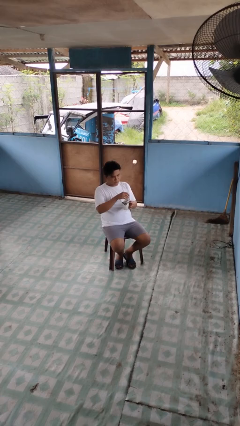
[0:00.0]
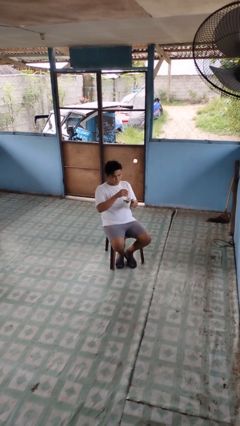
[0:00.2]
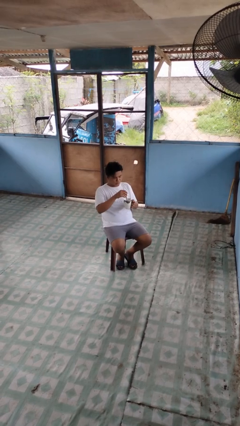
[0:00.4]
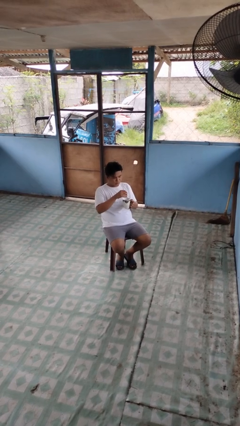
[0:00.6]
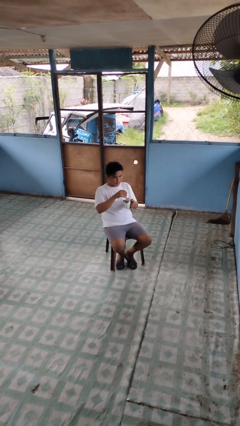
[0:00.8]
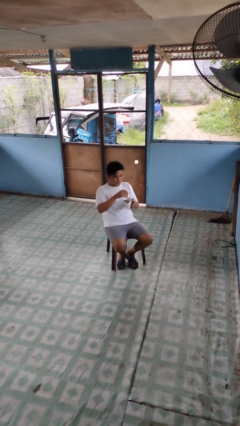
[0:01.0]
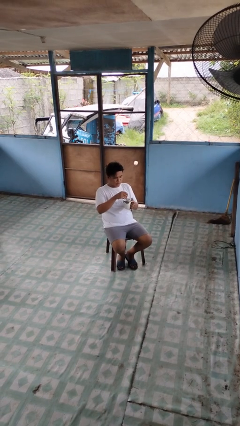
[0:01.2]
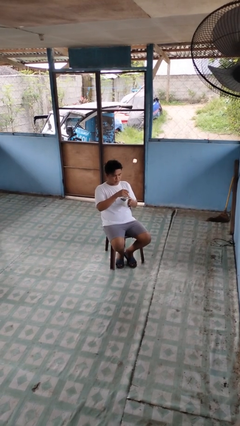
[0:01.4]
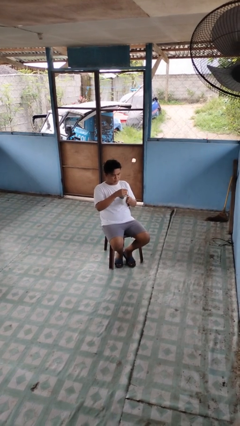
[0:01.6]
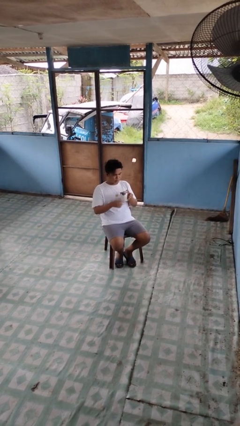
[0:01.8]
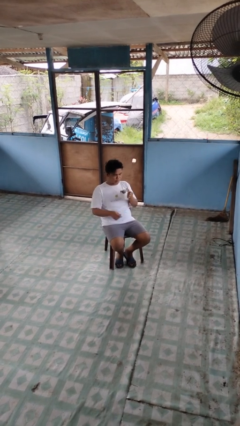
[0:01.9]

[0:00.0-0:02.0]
person stirs mug

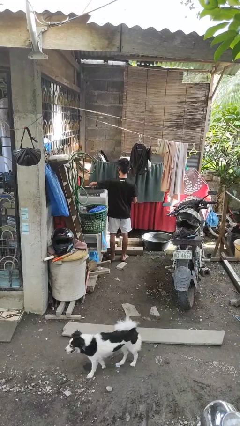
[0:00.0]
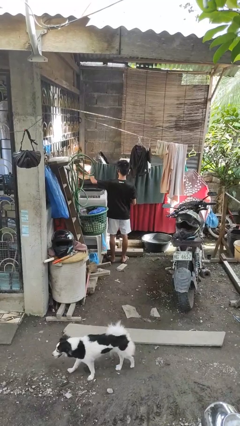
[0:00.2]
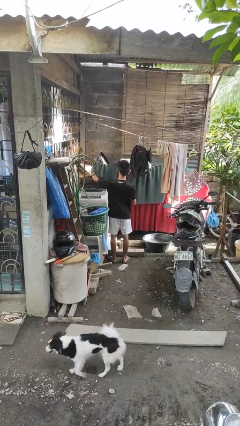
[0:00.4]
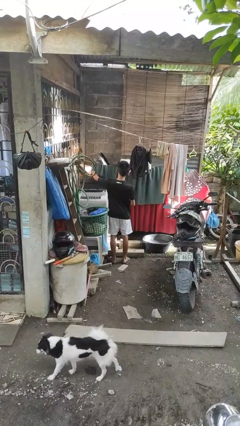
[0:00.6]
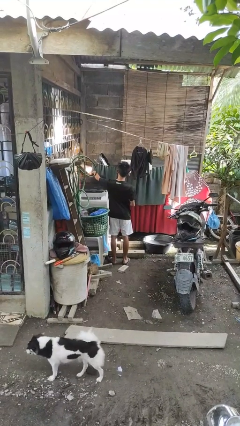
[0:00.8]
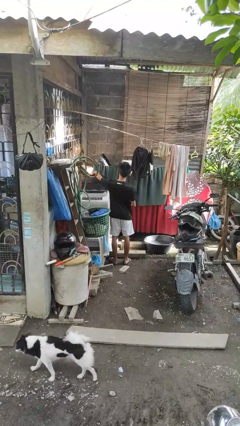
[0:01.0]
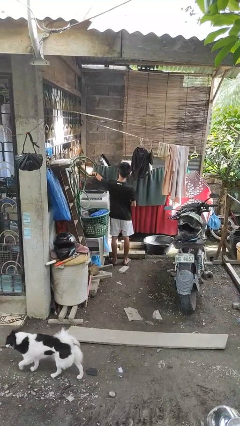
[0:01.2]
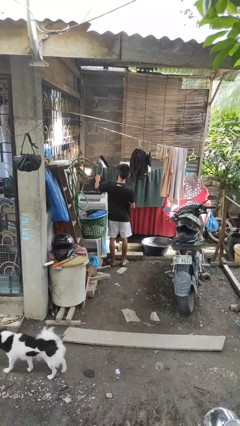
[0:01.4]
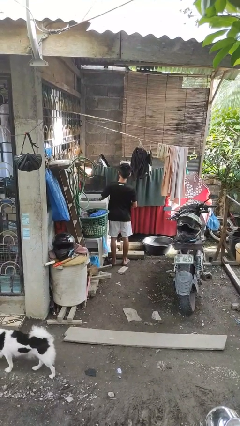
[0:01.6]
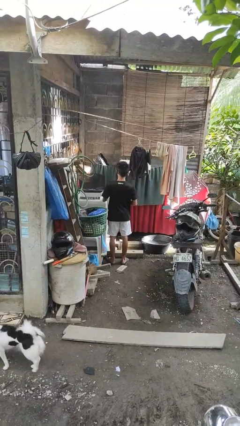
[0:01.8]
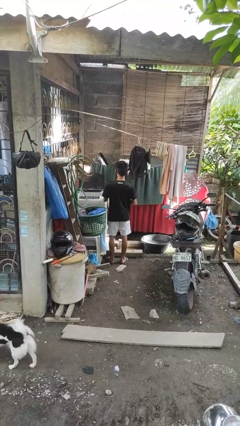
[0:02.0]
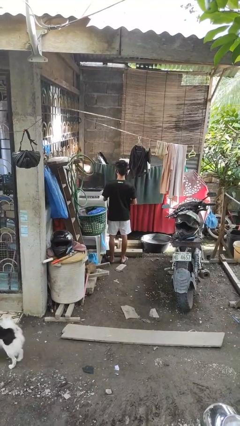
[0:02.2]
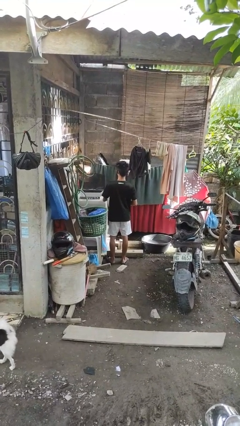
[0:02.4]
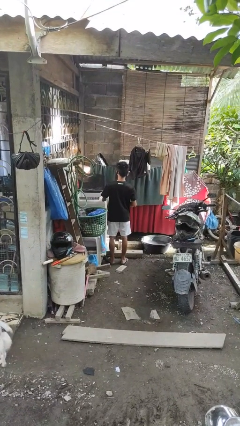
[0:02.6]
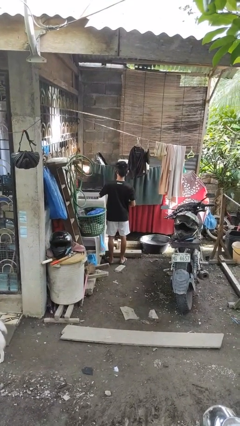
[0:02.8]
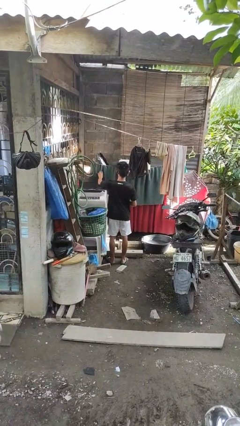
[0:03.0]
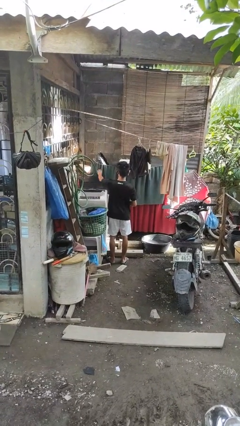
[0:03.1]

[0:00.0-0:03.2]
person opens clothes washer

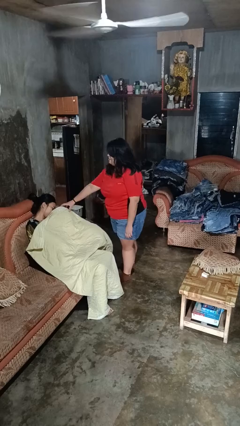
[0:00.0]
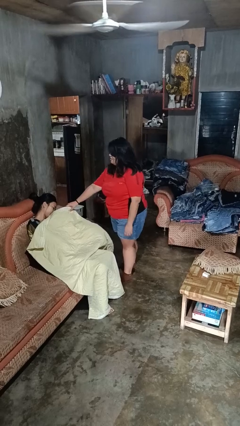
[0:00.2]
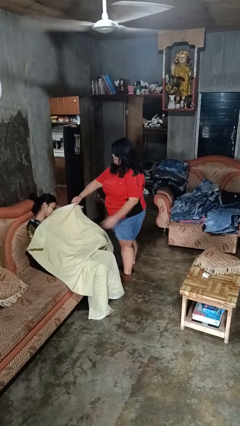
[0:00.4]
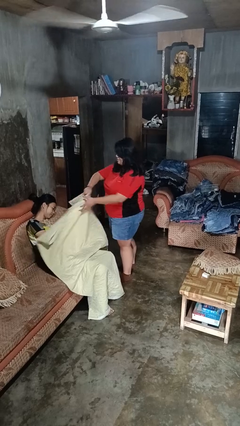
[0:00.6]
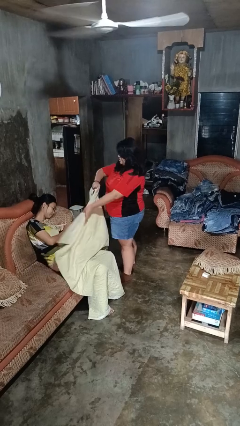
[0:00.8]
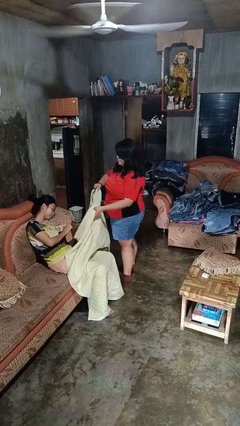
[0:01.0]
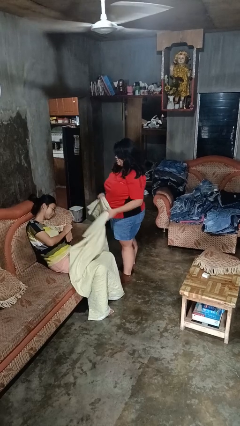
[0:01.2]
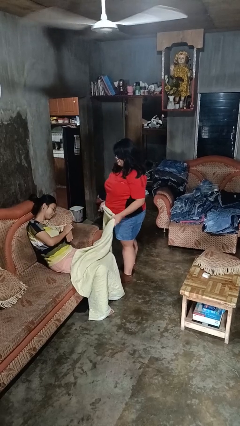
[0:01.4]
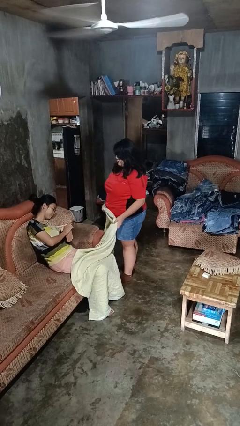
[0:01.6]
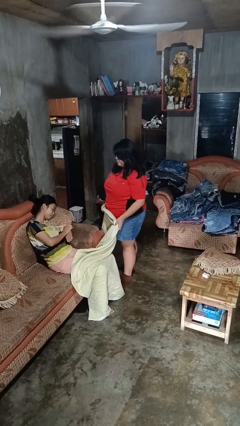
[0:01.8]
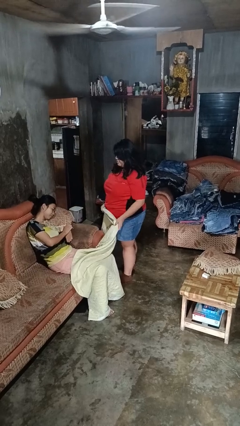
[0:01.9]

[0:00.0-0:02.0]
person uncovers friend with blanket

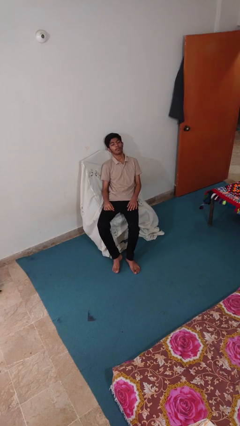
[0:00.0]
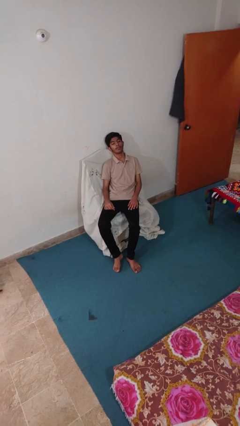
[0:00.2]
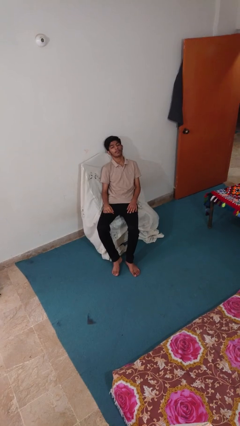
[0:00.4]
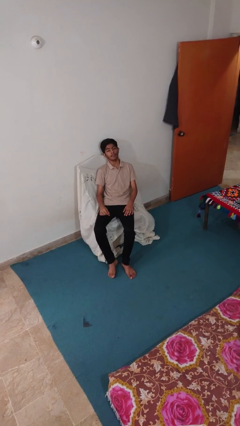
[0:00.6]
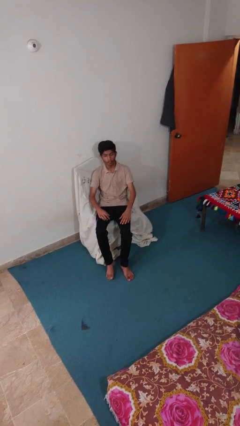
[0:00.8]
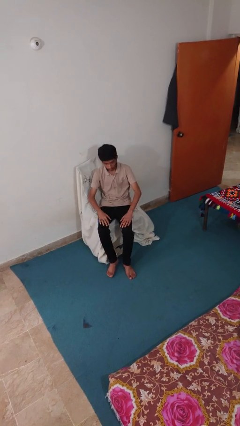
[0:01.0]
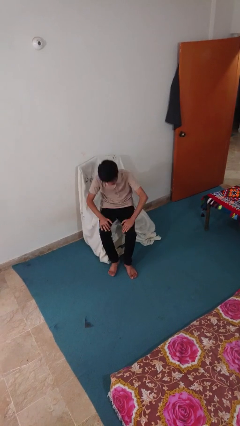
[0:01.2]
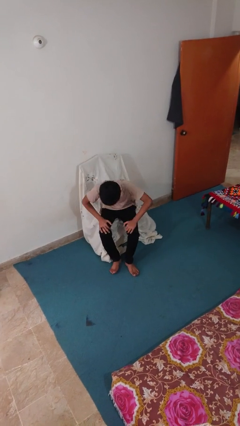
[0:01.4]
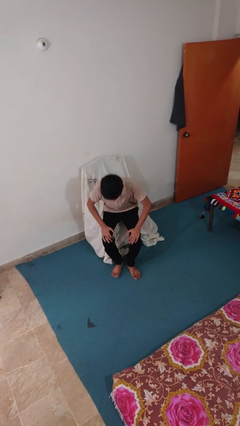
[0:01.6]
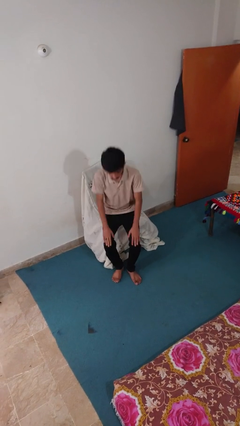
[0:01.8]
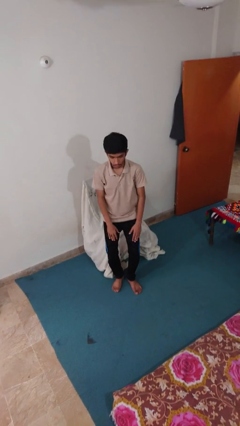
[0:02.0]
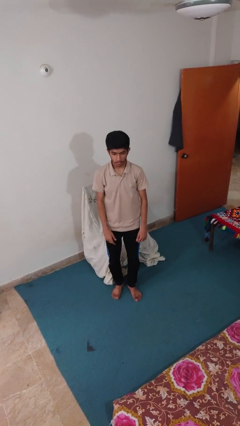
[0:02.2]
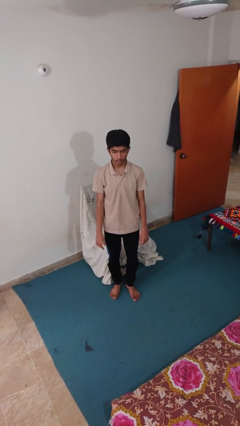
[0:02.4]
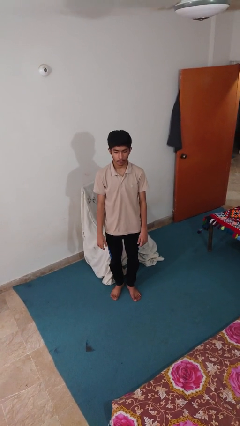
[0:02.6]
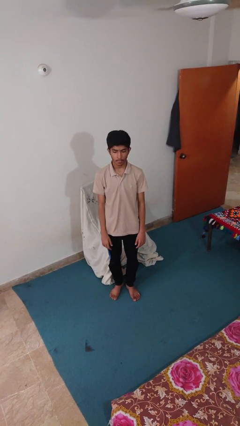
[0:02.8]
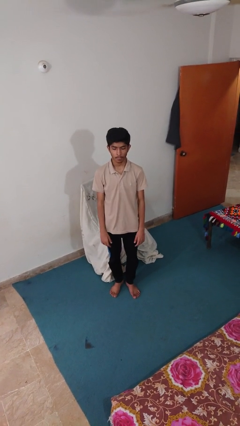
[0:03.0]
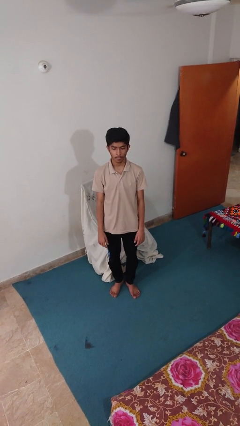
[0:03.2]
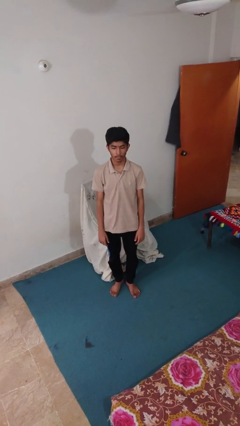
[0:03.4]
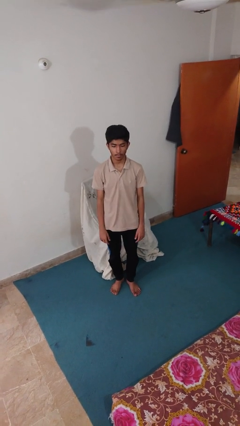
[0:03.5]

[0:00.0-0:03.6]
person stands up

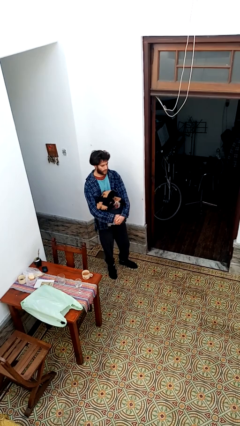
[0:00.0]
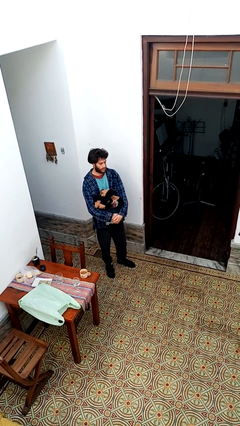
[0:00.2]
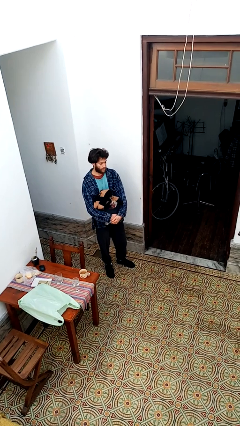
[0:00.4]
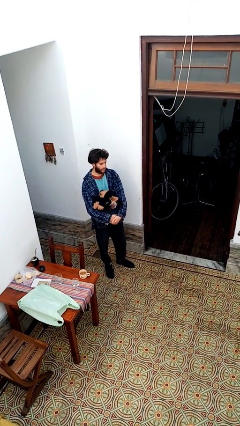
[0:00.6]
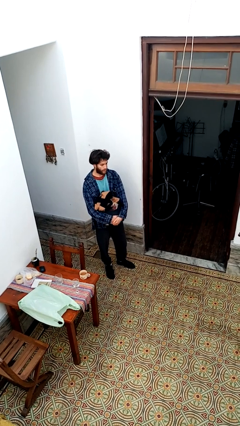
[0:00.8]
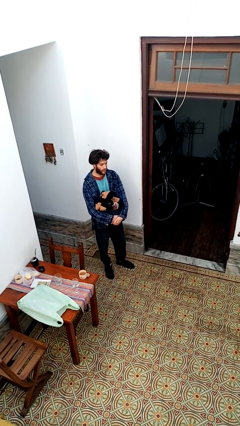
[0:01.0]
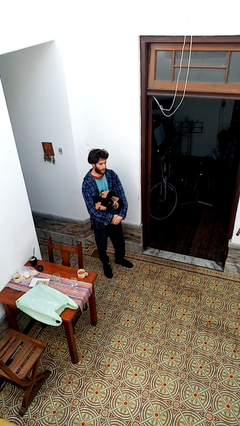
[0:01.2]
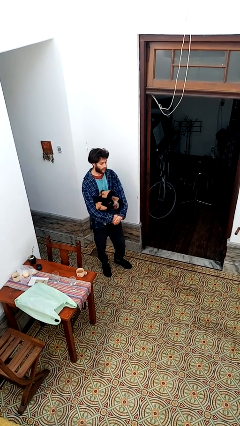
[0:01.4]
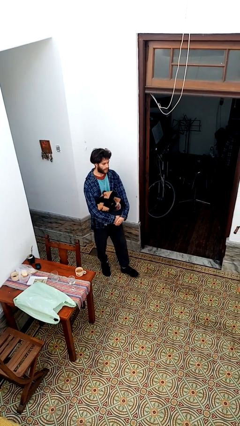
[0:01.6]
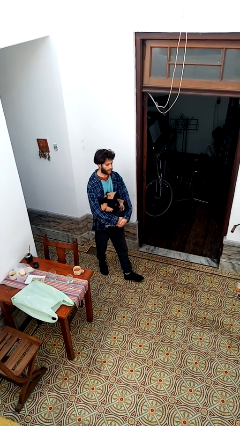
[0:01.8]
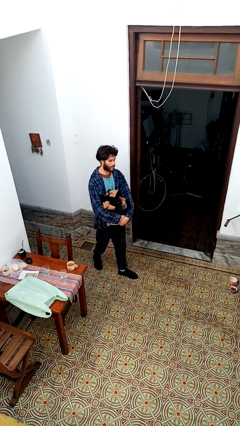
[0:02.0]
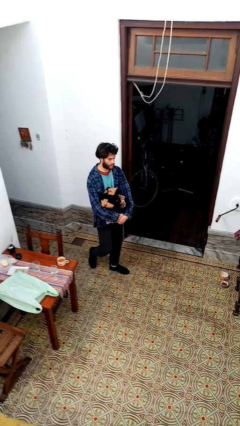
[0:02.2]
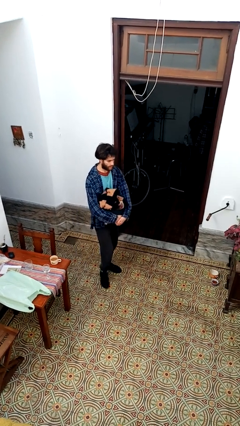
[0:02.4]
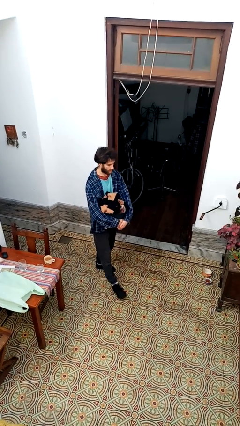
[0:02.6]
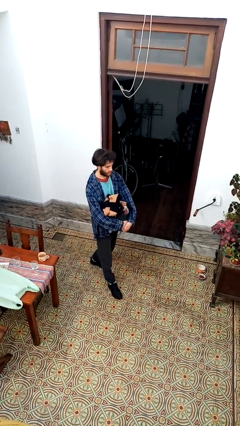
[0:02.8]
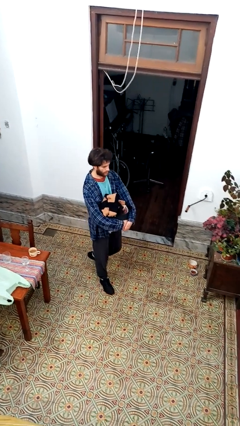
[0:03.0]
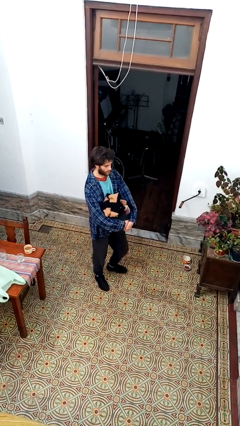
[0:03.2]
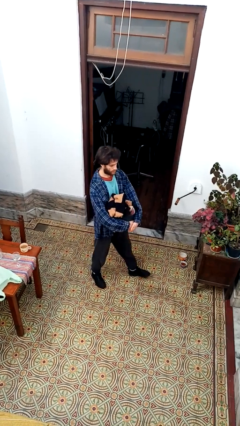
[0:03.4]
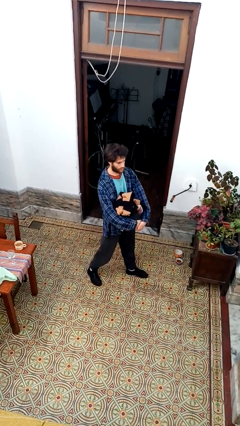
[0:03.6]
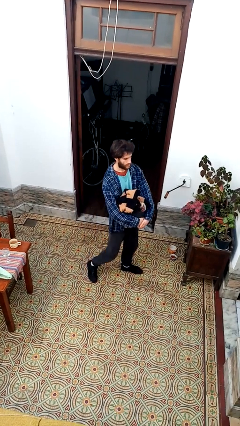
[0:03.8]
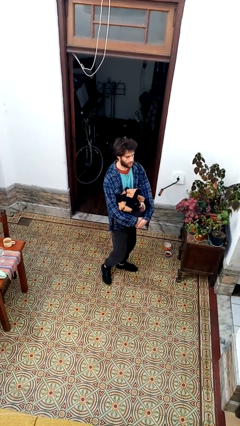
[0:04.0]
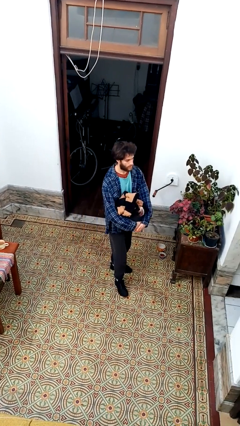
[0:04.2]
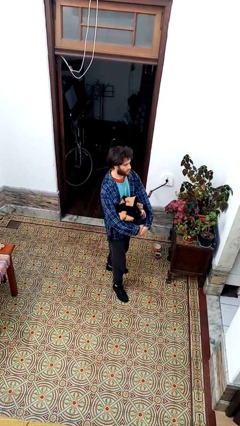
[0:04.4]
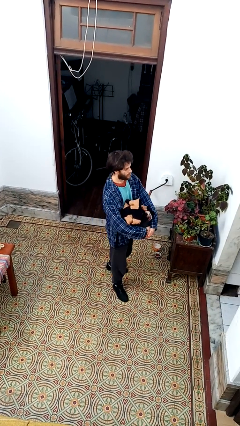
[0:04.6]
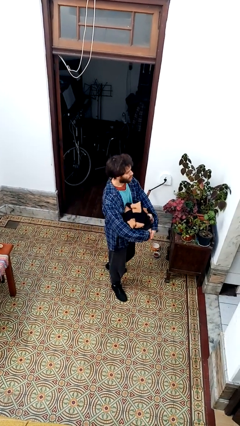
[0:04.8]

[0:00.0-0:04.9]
person carries laundry basket

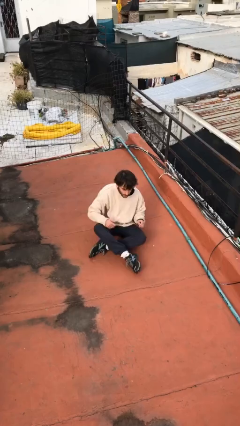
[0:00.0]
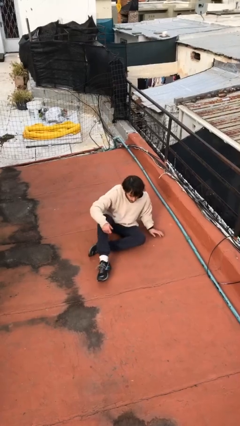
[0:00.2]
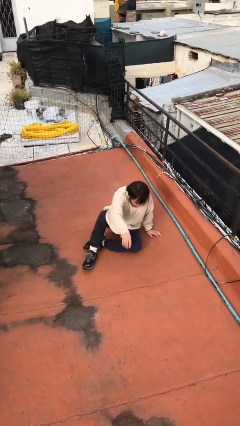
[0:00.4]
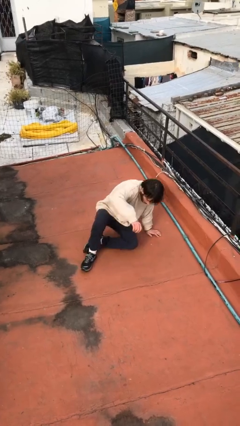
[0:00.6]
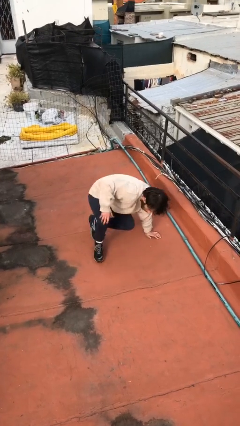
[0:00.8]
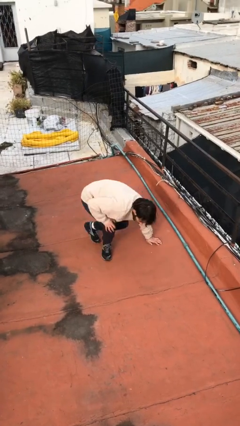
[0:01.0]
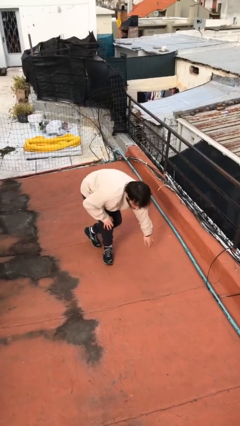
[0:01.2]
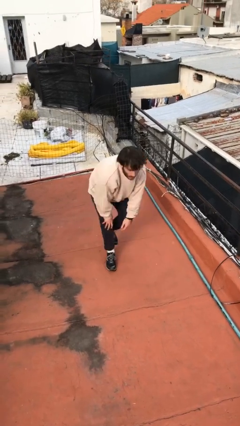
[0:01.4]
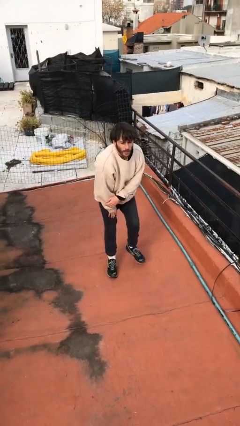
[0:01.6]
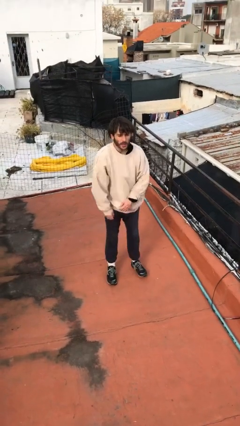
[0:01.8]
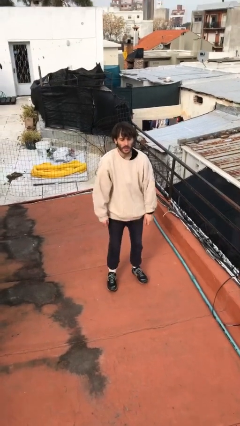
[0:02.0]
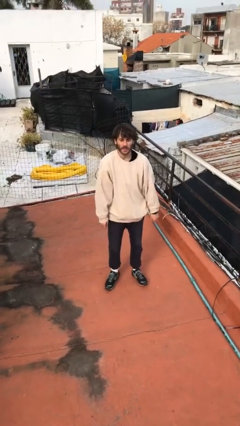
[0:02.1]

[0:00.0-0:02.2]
person stands up from floor
